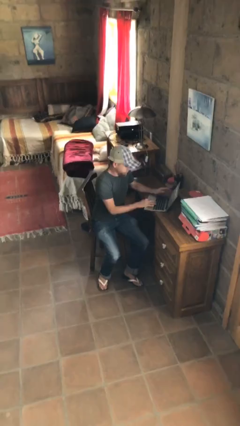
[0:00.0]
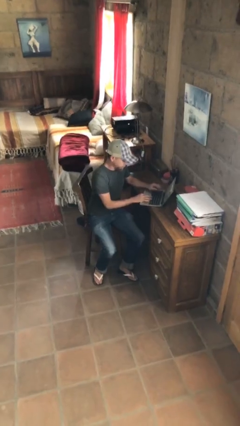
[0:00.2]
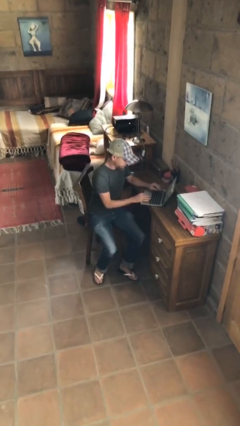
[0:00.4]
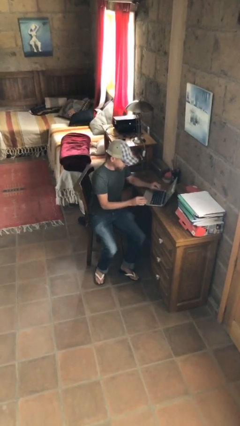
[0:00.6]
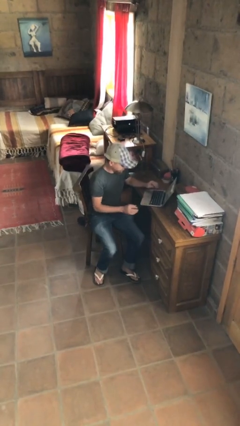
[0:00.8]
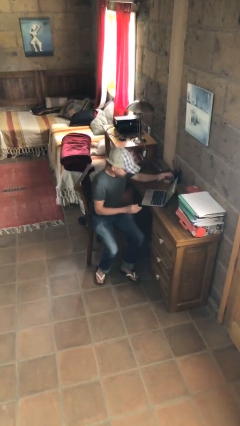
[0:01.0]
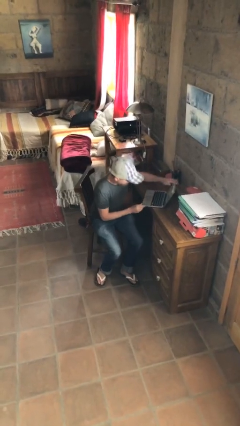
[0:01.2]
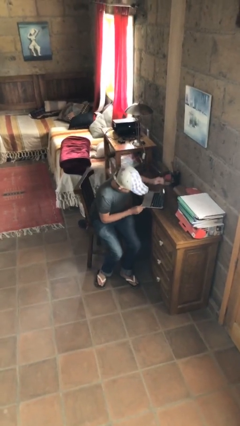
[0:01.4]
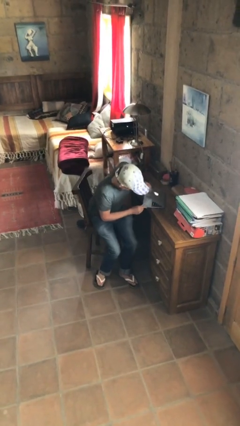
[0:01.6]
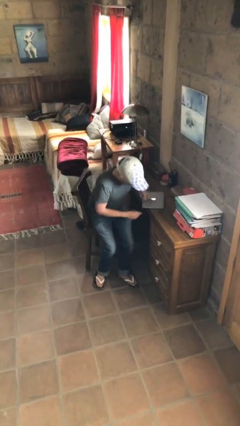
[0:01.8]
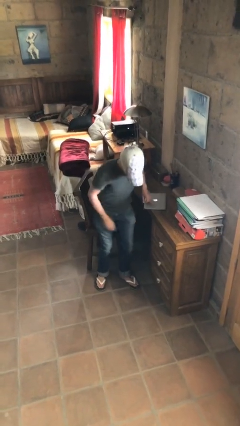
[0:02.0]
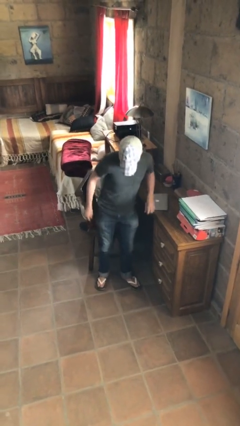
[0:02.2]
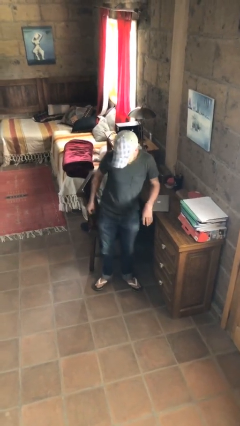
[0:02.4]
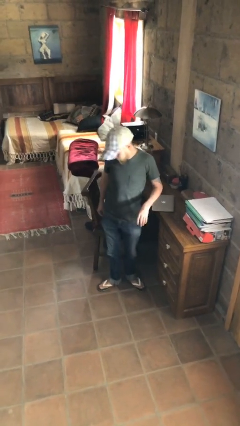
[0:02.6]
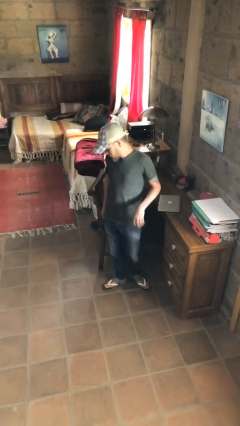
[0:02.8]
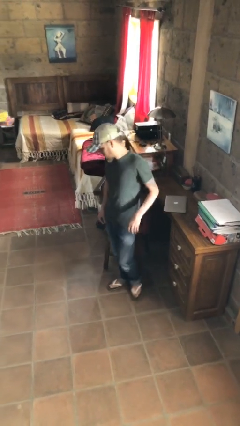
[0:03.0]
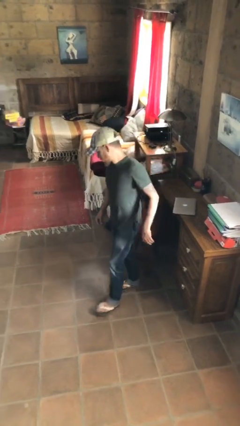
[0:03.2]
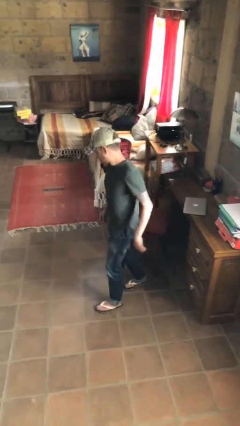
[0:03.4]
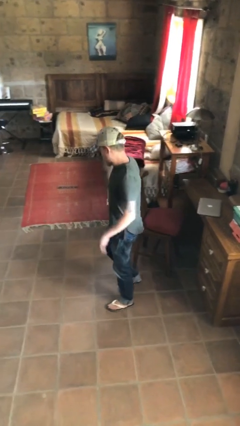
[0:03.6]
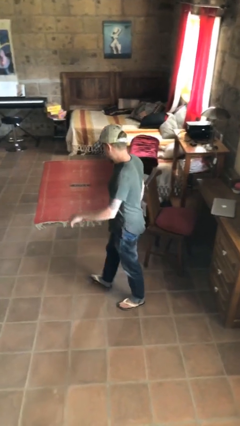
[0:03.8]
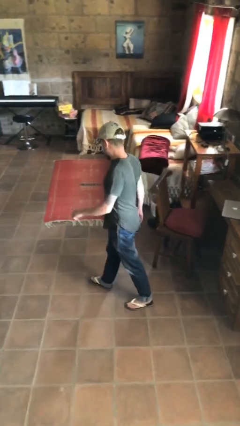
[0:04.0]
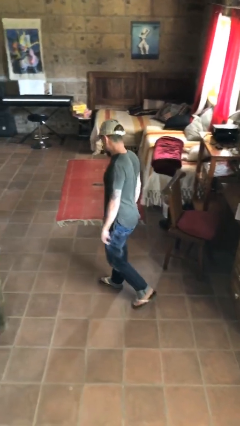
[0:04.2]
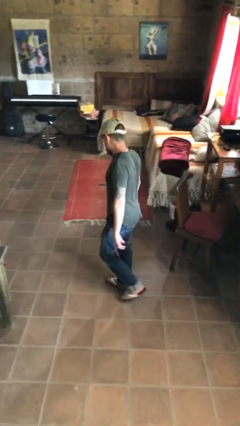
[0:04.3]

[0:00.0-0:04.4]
person stands up

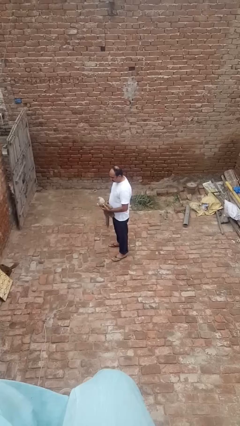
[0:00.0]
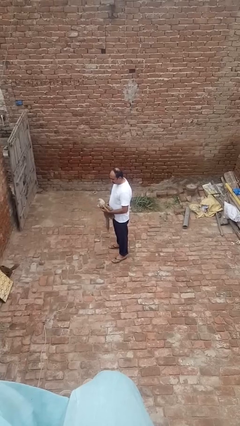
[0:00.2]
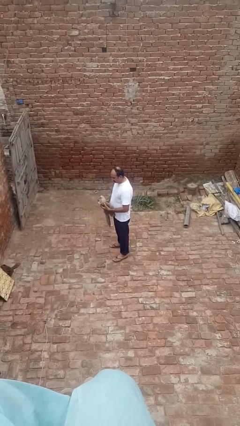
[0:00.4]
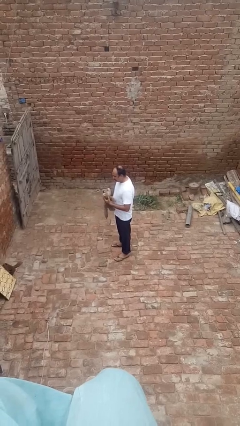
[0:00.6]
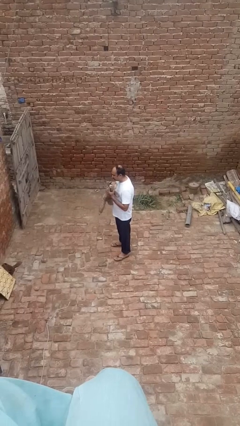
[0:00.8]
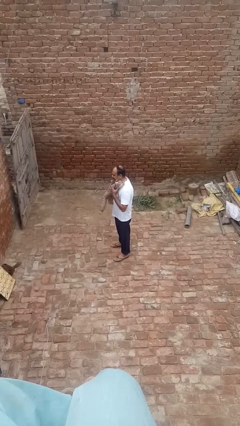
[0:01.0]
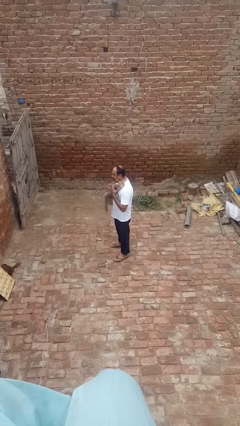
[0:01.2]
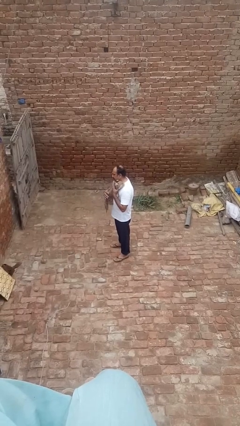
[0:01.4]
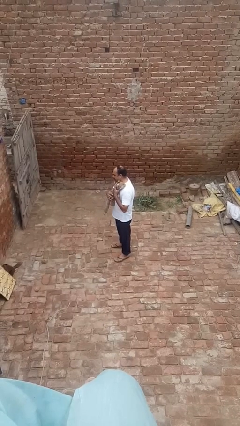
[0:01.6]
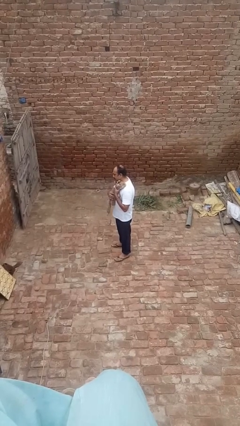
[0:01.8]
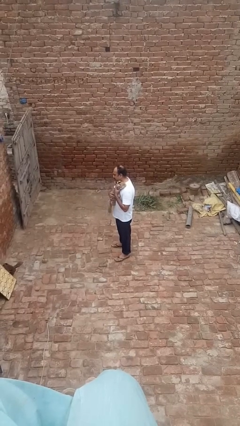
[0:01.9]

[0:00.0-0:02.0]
person hugs stuffed animal

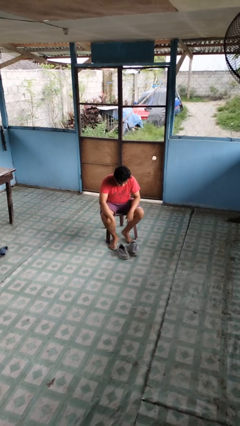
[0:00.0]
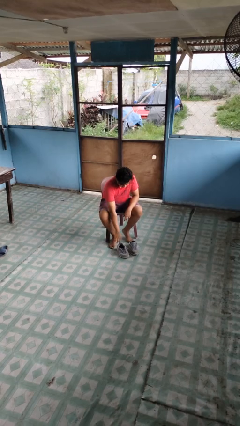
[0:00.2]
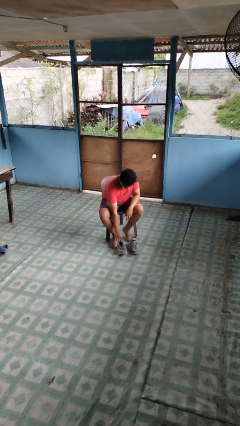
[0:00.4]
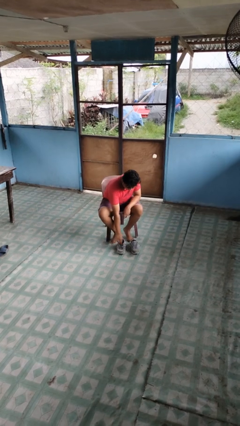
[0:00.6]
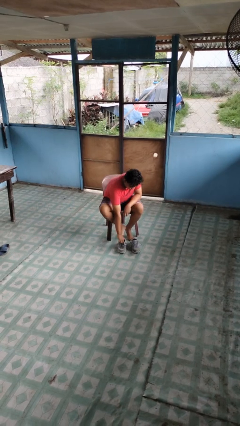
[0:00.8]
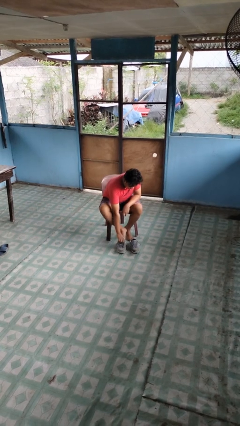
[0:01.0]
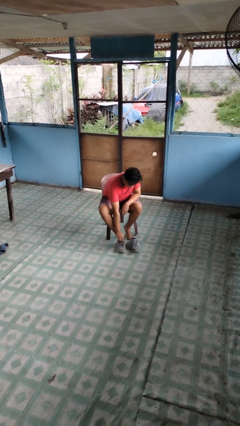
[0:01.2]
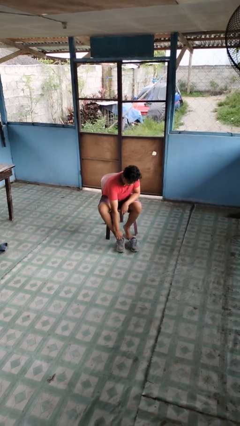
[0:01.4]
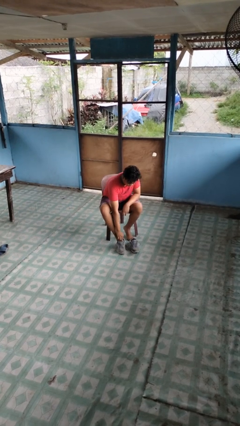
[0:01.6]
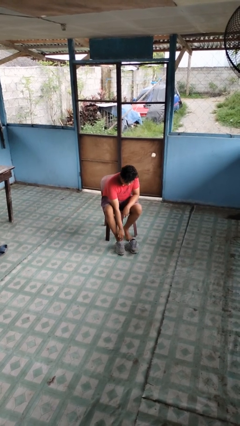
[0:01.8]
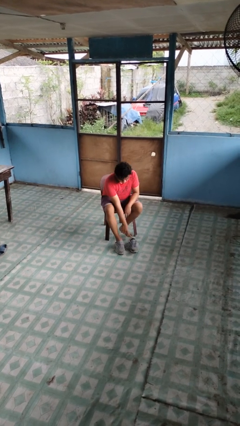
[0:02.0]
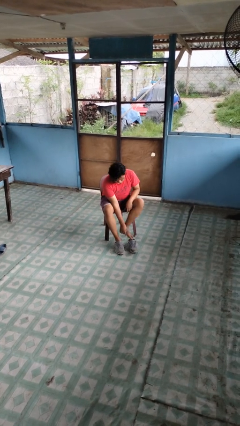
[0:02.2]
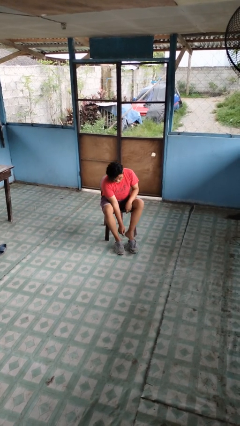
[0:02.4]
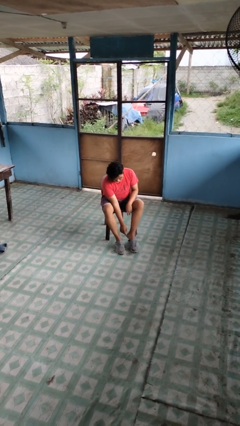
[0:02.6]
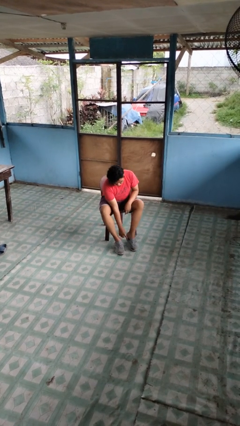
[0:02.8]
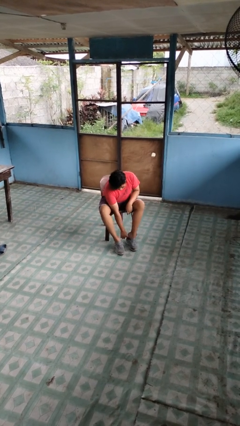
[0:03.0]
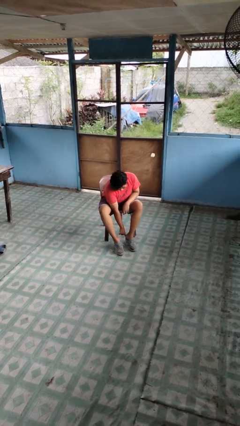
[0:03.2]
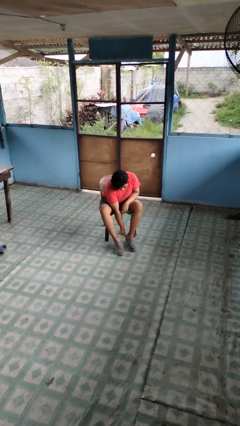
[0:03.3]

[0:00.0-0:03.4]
person puts on shoes

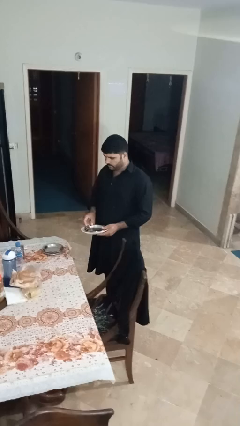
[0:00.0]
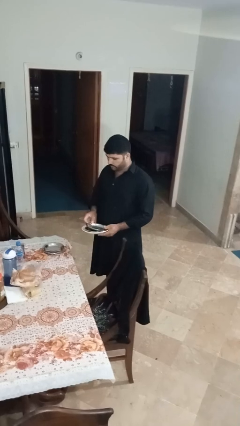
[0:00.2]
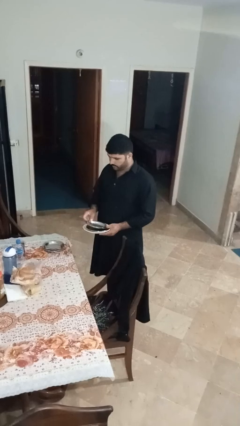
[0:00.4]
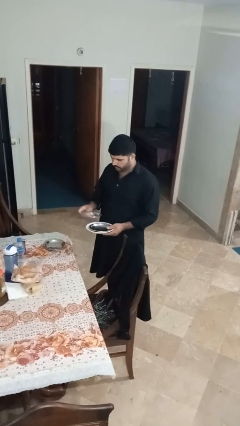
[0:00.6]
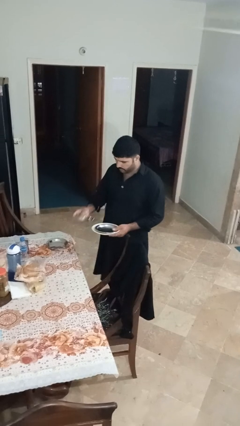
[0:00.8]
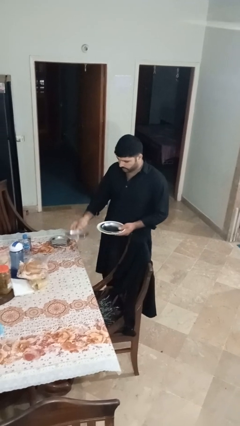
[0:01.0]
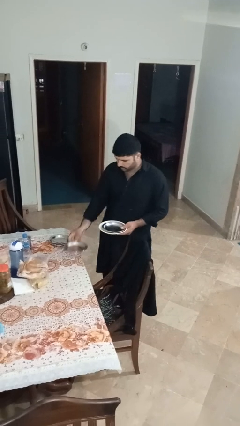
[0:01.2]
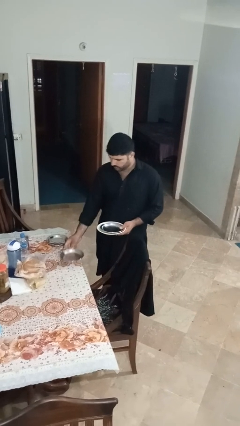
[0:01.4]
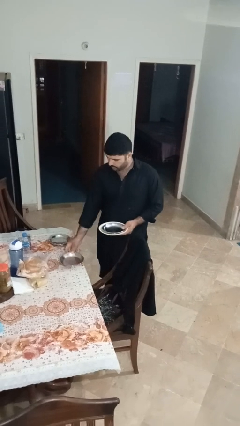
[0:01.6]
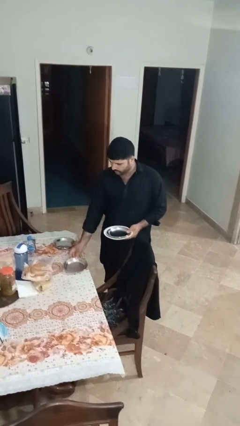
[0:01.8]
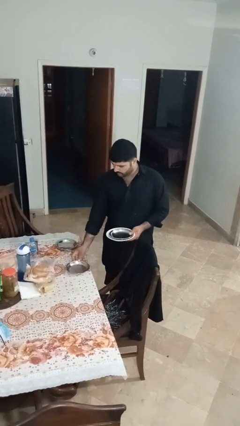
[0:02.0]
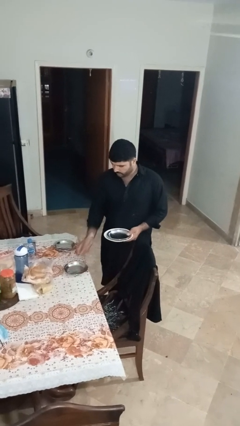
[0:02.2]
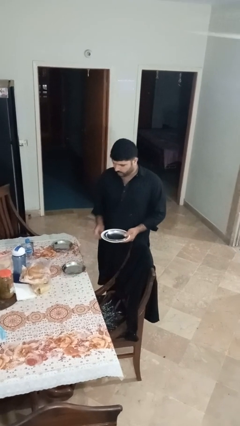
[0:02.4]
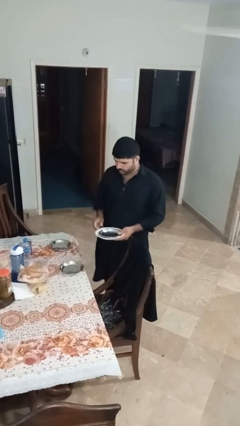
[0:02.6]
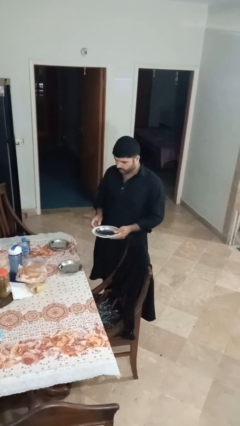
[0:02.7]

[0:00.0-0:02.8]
person sets table

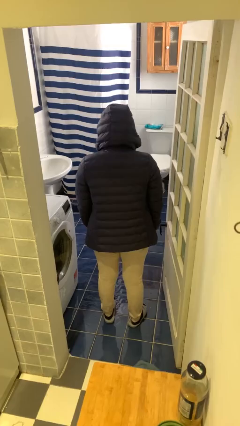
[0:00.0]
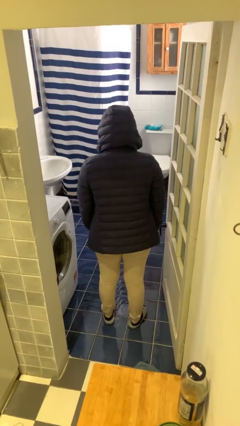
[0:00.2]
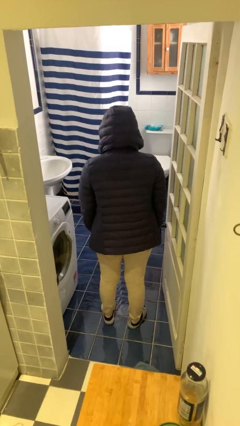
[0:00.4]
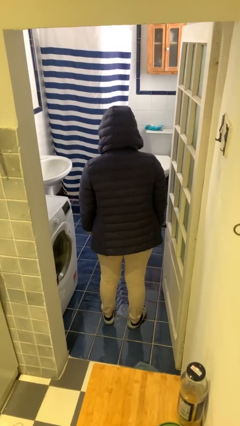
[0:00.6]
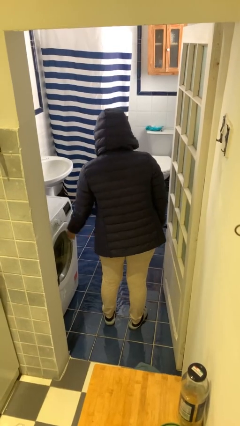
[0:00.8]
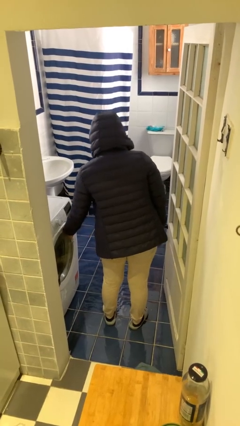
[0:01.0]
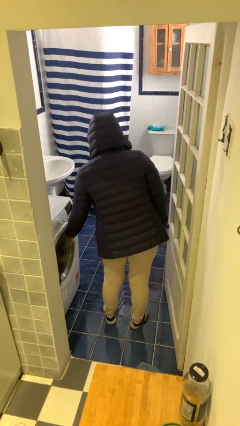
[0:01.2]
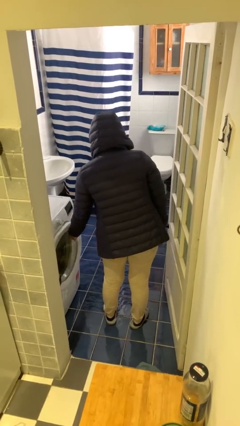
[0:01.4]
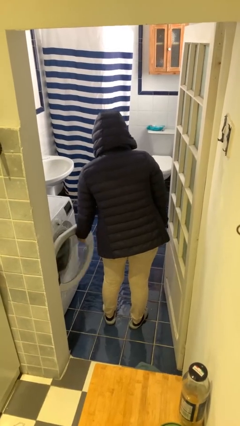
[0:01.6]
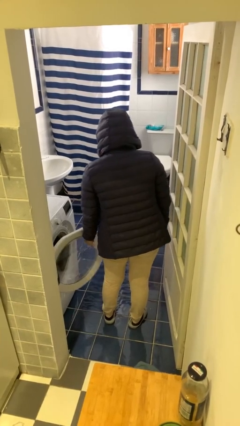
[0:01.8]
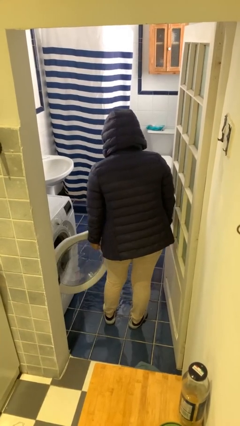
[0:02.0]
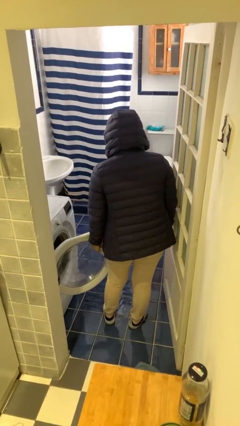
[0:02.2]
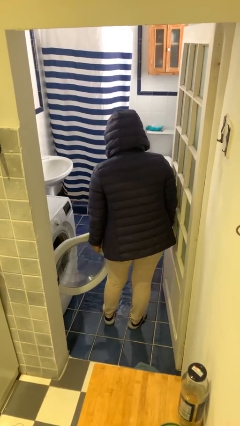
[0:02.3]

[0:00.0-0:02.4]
person opens clothes washer

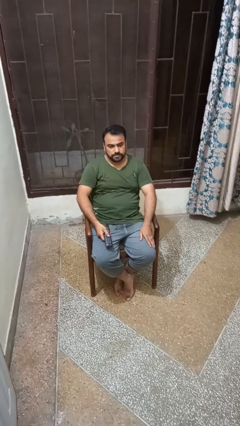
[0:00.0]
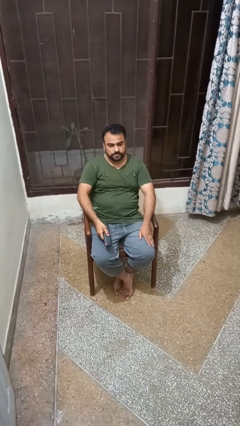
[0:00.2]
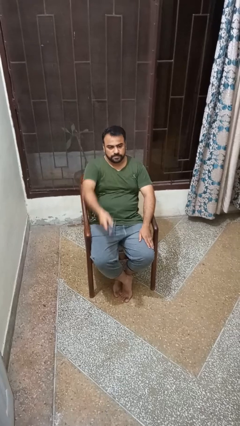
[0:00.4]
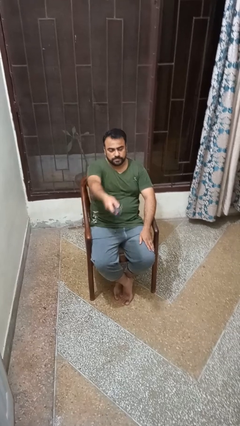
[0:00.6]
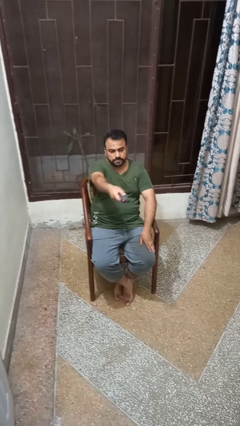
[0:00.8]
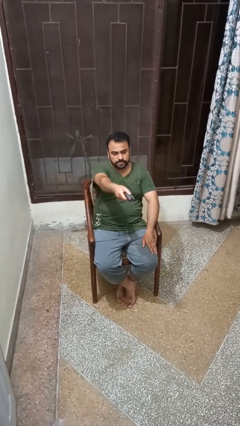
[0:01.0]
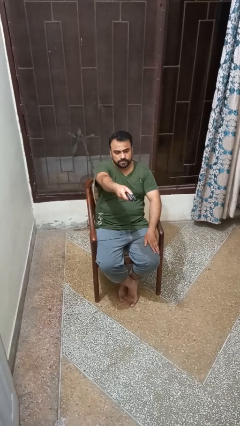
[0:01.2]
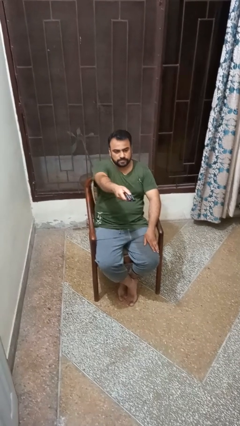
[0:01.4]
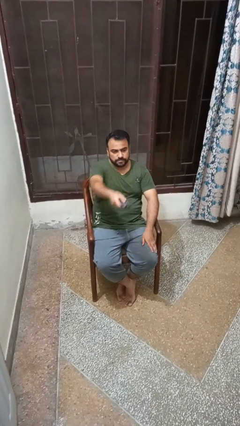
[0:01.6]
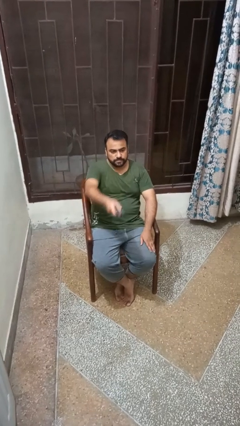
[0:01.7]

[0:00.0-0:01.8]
person uses television remote

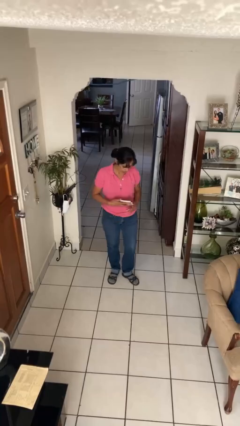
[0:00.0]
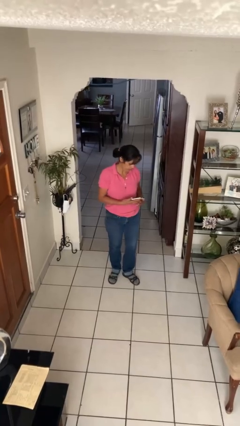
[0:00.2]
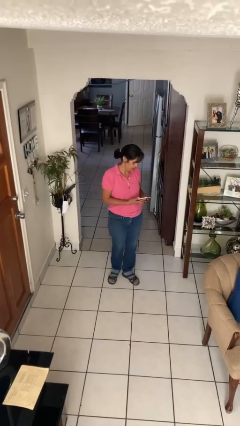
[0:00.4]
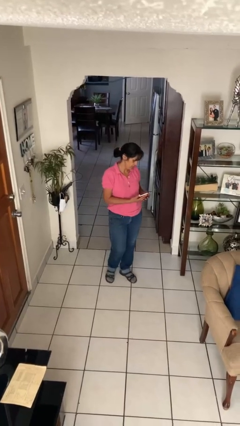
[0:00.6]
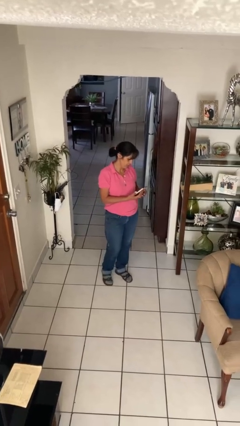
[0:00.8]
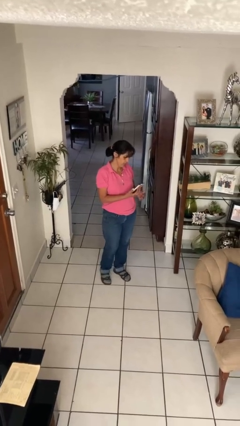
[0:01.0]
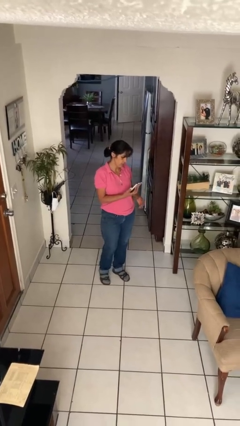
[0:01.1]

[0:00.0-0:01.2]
person takes phone from pocket
